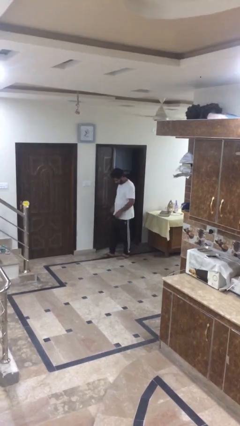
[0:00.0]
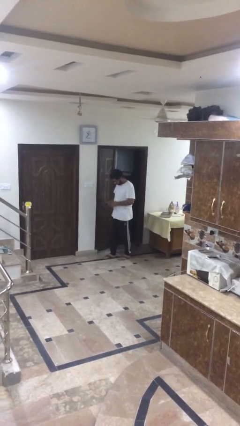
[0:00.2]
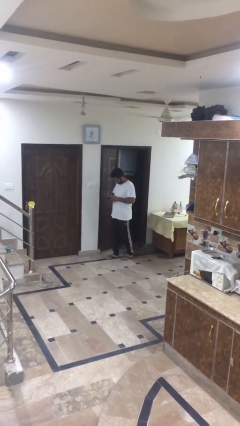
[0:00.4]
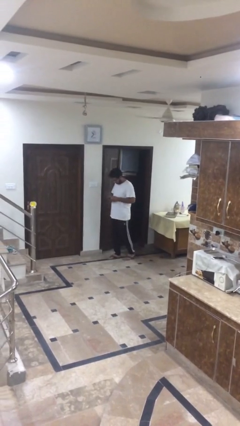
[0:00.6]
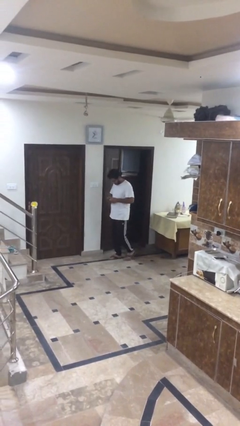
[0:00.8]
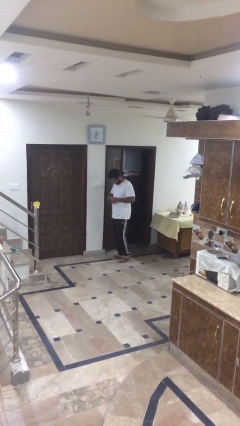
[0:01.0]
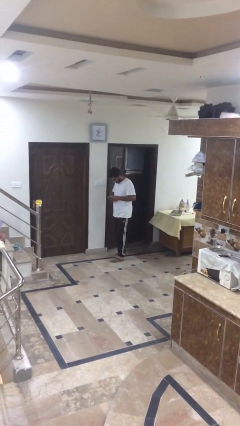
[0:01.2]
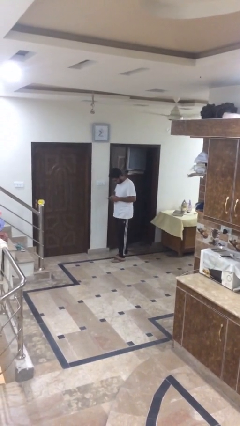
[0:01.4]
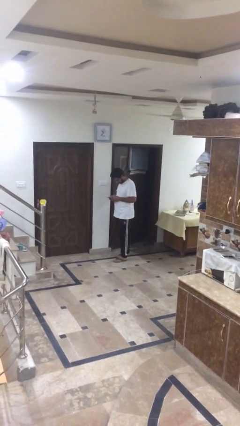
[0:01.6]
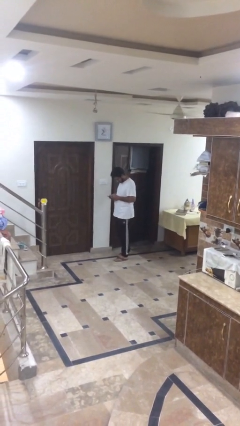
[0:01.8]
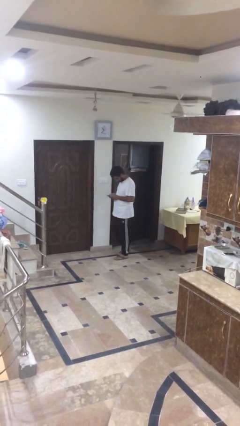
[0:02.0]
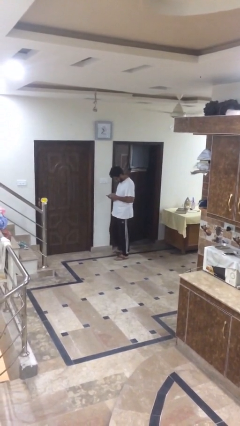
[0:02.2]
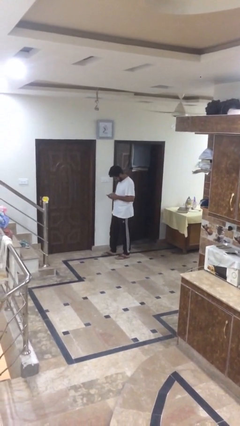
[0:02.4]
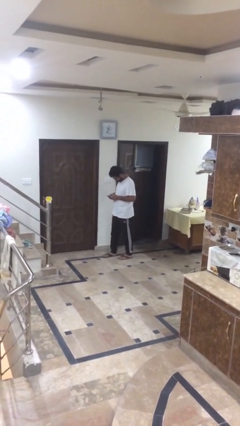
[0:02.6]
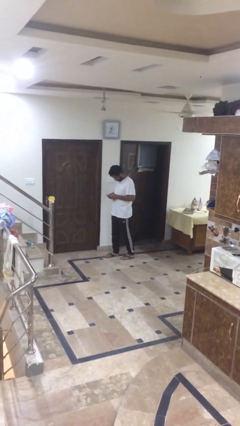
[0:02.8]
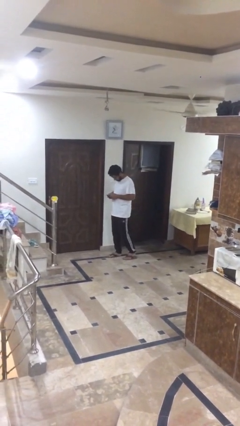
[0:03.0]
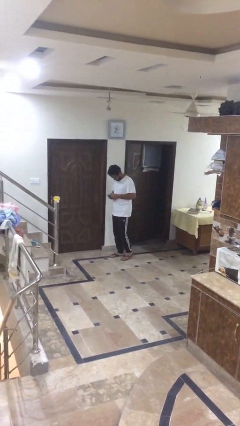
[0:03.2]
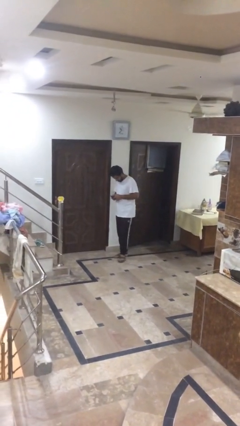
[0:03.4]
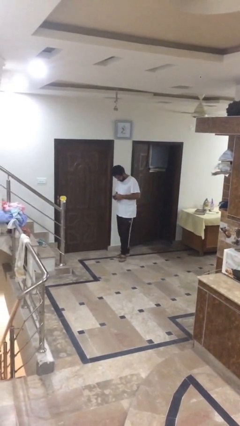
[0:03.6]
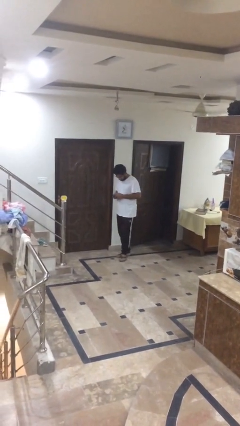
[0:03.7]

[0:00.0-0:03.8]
person texts on phone

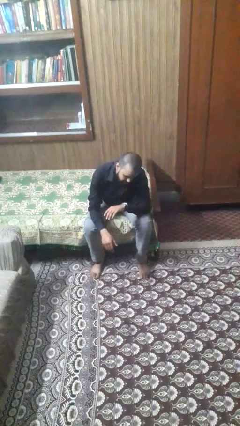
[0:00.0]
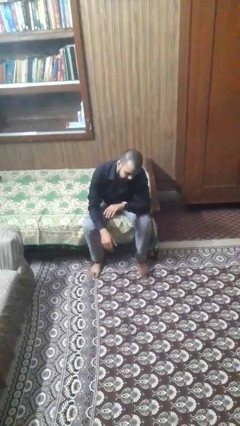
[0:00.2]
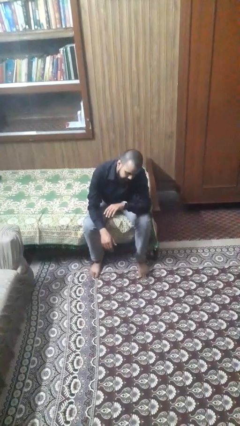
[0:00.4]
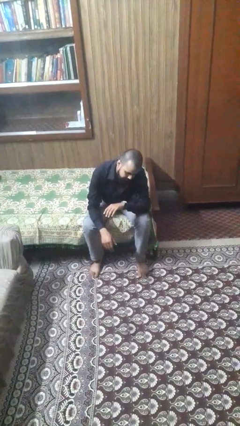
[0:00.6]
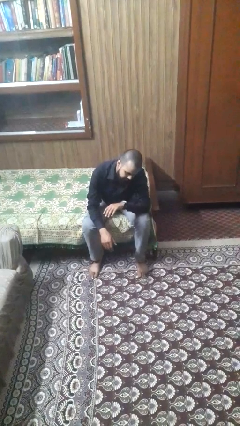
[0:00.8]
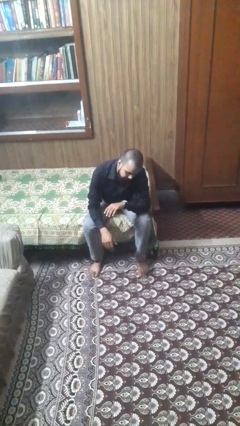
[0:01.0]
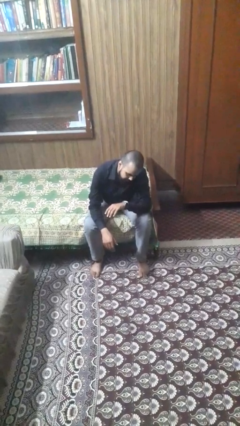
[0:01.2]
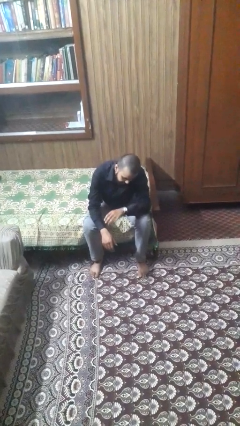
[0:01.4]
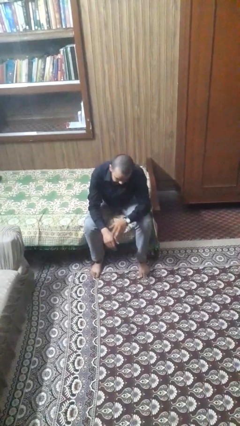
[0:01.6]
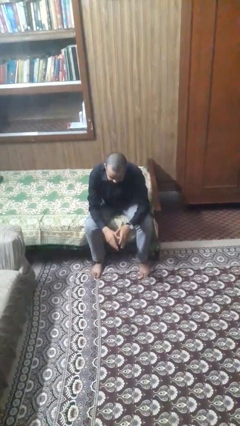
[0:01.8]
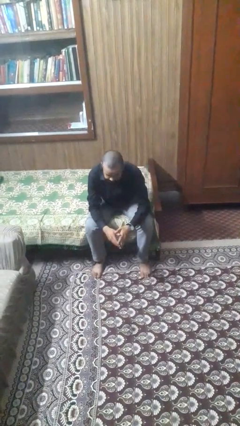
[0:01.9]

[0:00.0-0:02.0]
person looks at hands in lap

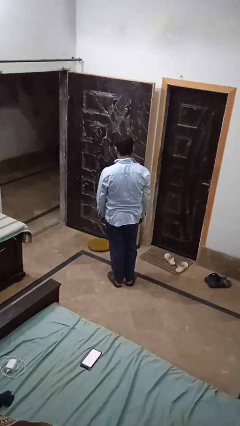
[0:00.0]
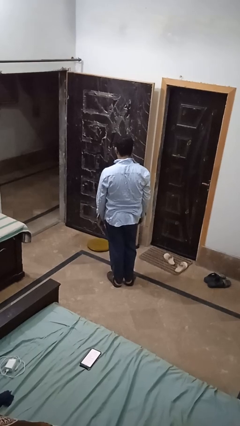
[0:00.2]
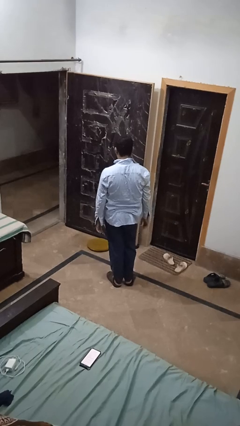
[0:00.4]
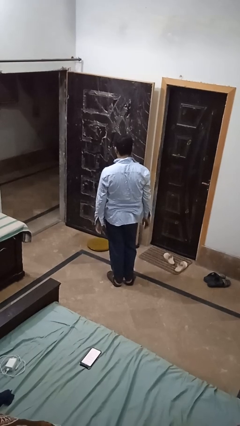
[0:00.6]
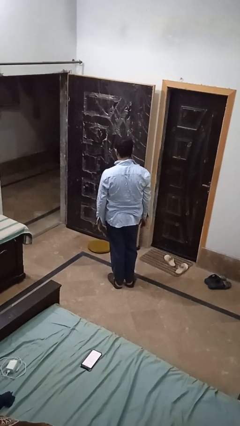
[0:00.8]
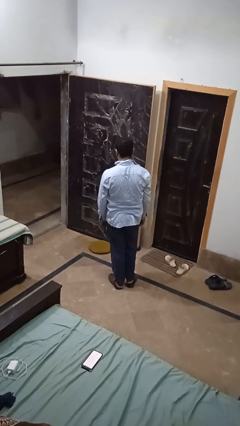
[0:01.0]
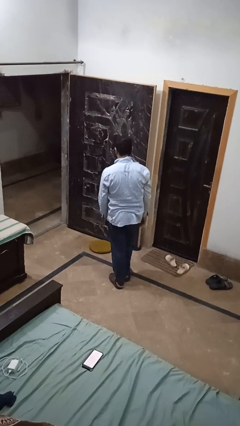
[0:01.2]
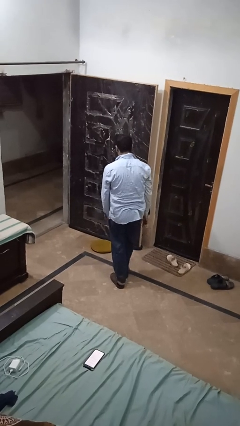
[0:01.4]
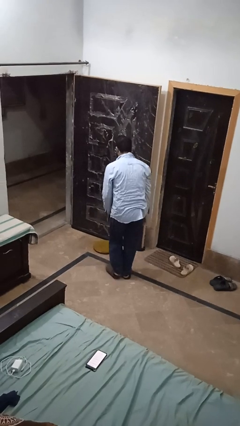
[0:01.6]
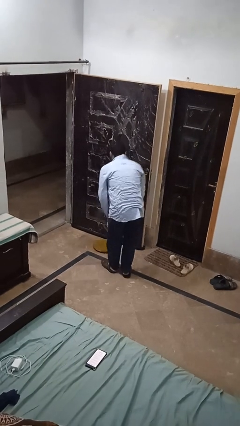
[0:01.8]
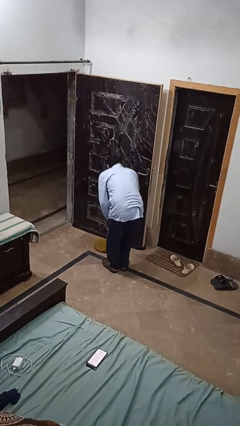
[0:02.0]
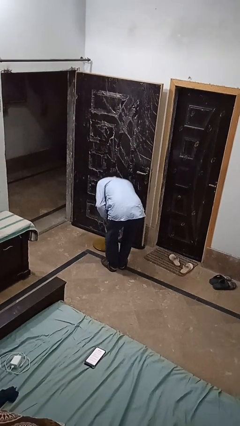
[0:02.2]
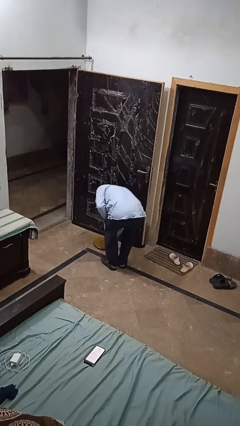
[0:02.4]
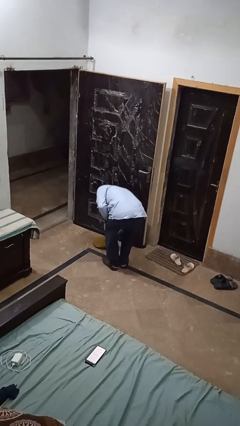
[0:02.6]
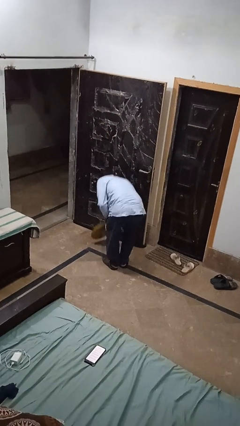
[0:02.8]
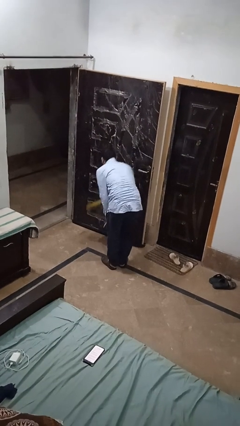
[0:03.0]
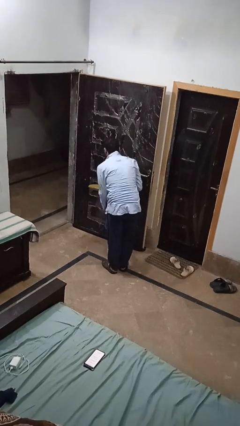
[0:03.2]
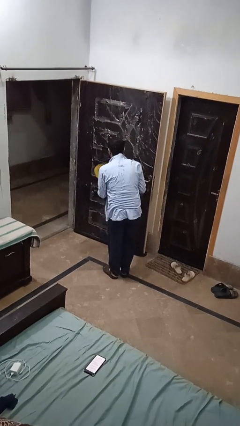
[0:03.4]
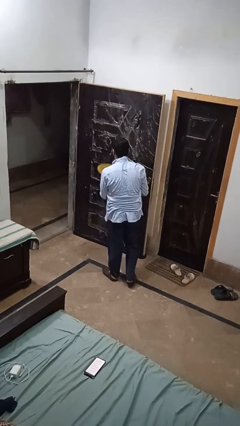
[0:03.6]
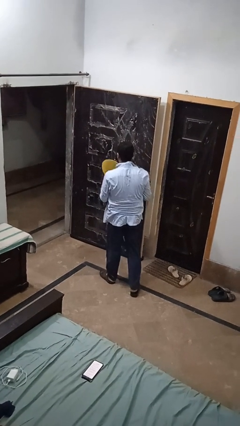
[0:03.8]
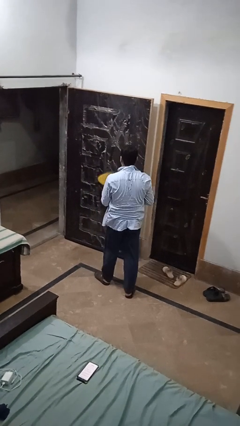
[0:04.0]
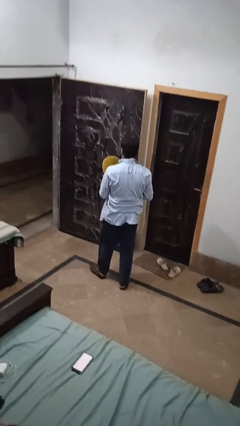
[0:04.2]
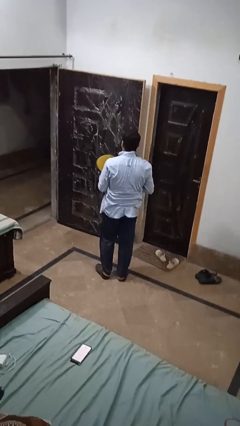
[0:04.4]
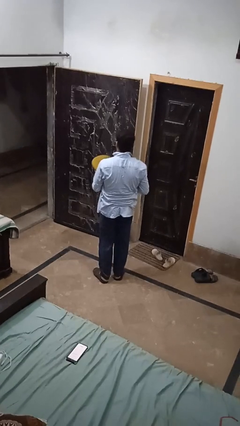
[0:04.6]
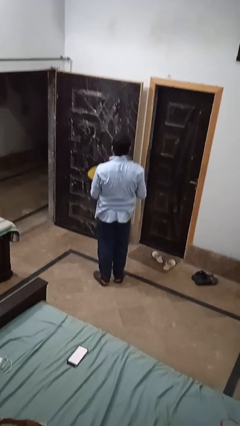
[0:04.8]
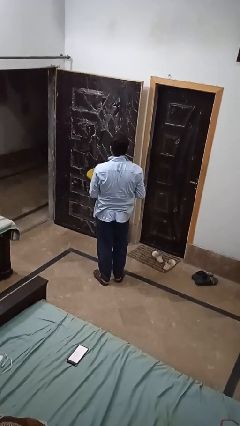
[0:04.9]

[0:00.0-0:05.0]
person picks up object from floor

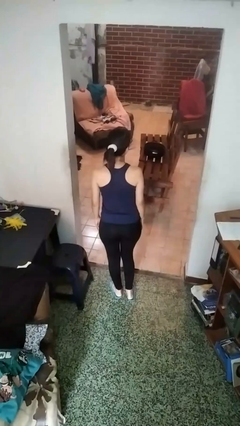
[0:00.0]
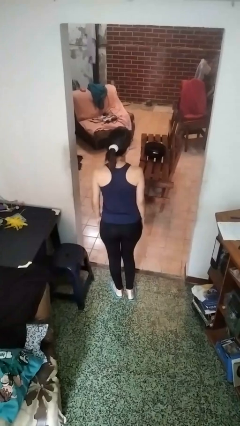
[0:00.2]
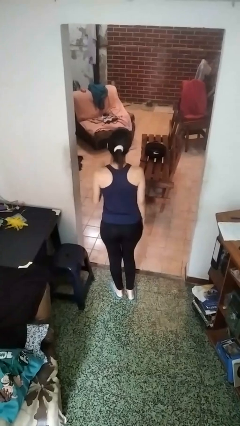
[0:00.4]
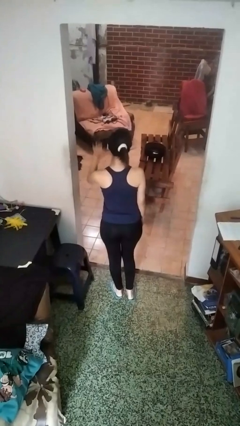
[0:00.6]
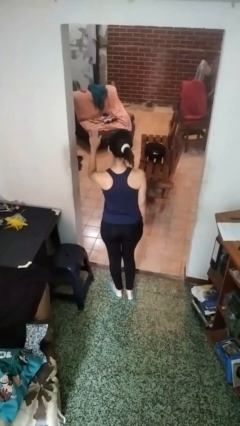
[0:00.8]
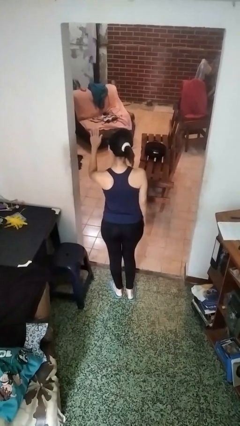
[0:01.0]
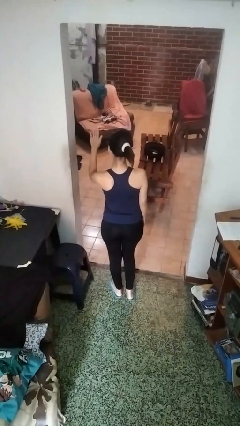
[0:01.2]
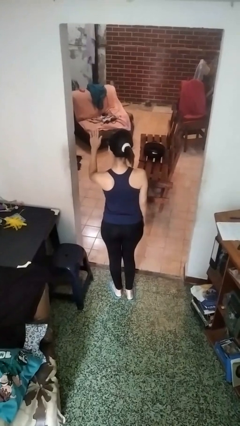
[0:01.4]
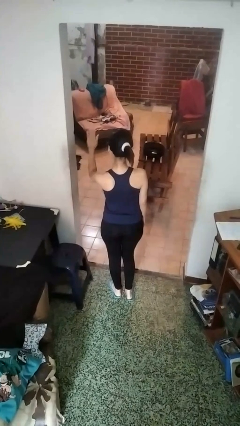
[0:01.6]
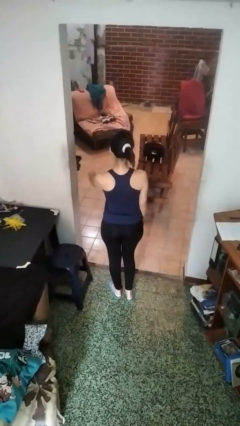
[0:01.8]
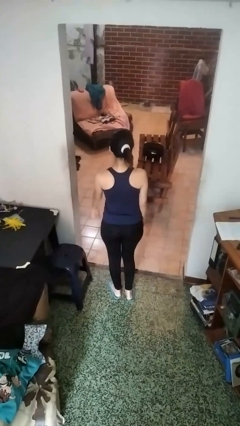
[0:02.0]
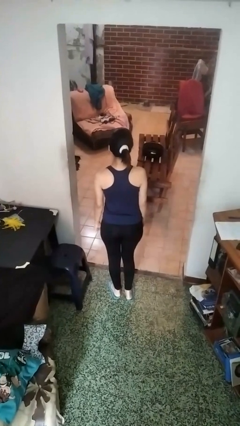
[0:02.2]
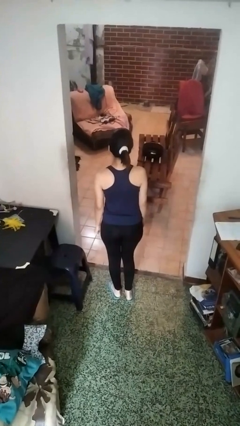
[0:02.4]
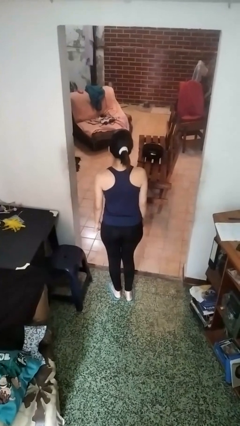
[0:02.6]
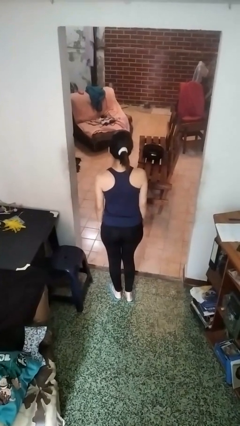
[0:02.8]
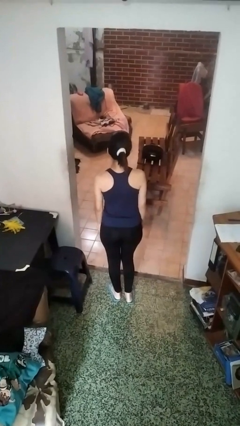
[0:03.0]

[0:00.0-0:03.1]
person gestures stop

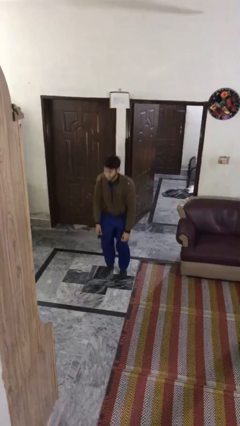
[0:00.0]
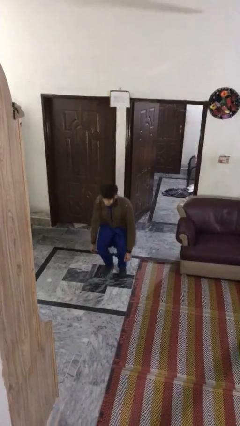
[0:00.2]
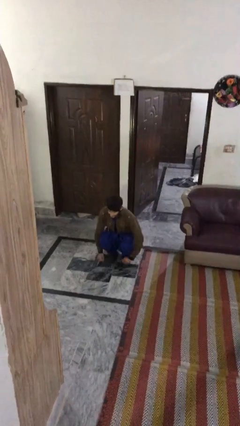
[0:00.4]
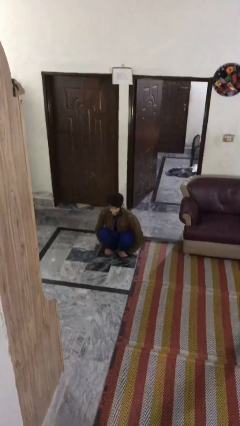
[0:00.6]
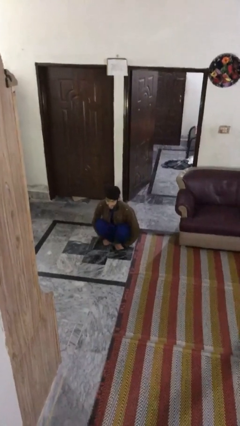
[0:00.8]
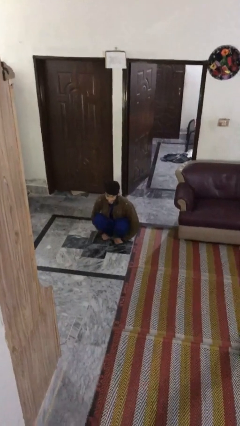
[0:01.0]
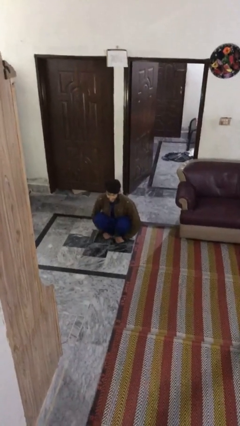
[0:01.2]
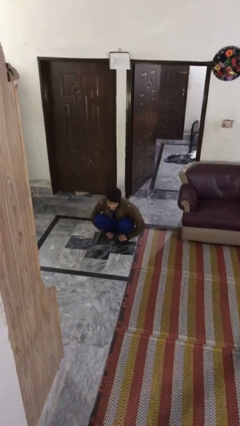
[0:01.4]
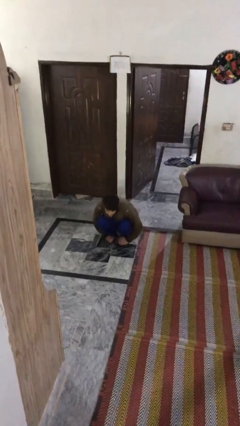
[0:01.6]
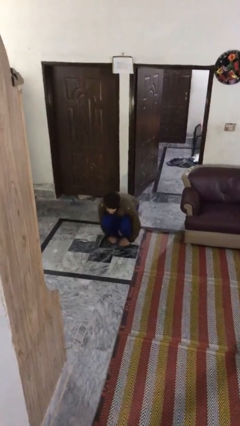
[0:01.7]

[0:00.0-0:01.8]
person sits down

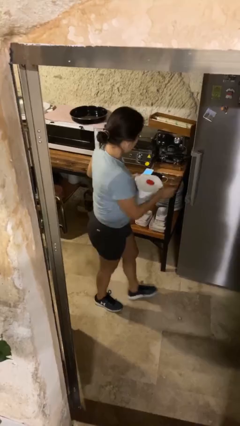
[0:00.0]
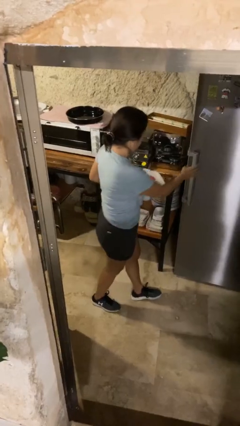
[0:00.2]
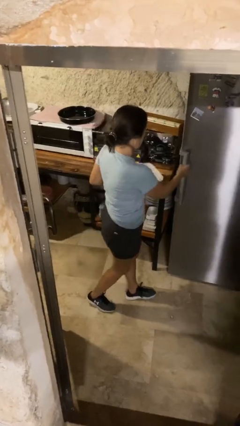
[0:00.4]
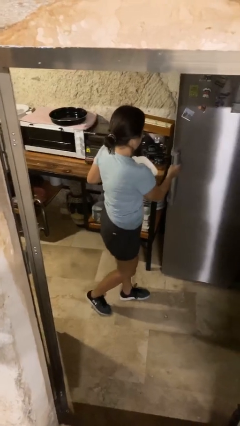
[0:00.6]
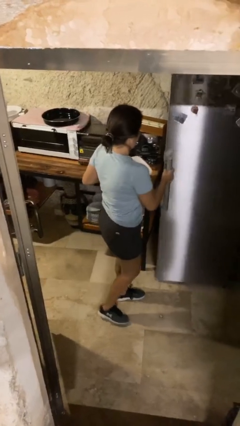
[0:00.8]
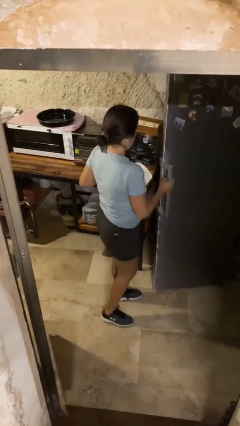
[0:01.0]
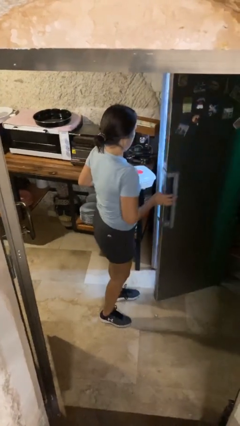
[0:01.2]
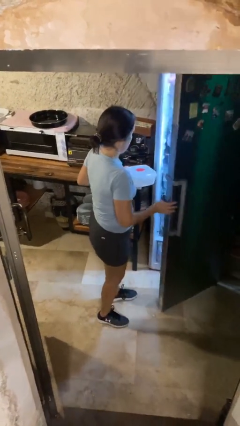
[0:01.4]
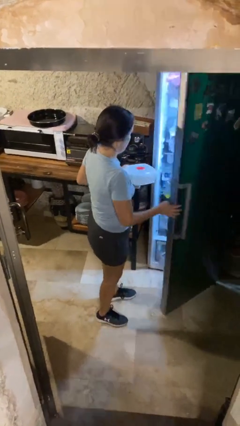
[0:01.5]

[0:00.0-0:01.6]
person opens refrigerator

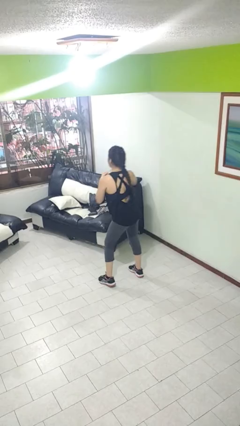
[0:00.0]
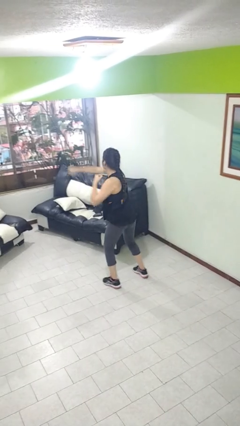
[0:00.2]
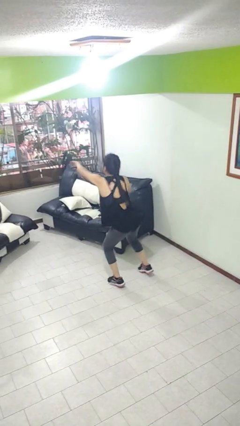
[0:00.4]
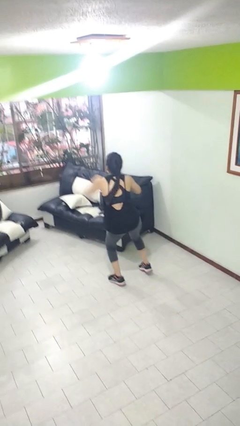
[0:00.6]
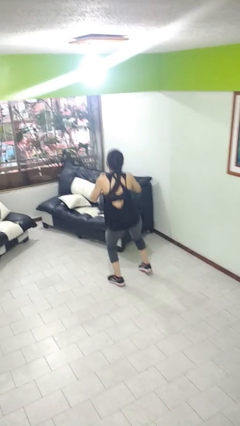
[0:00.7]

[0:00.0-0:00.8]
person punches
